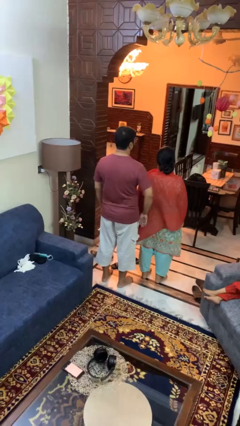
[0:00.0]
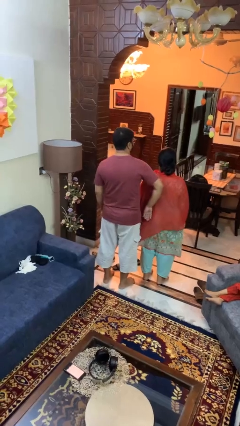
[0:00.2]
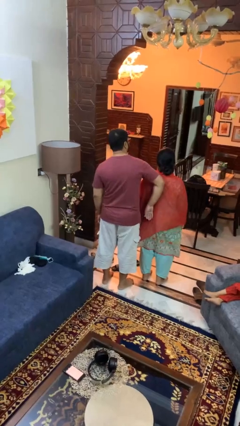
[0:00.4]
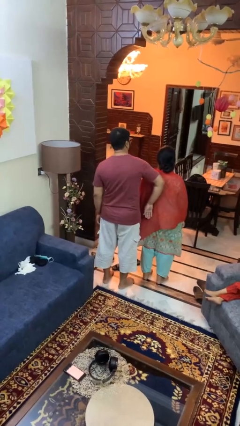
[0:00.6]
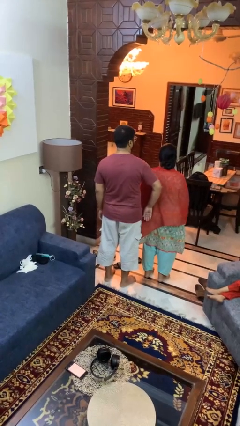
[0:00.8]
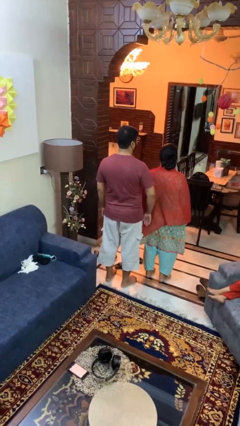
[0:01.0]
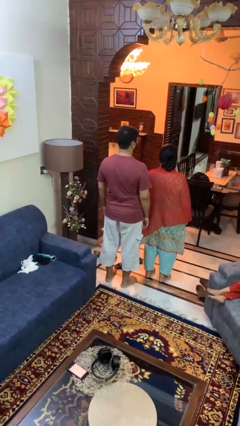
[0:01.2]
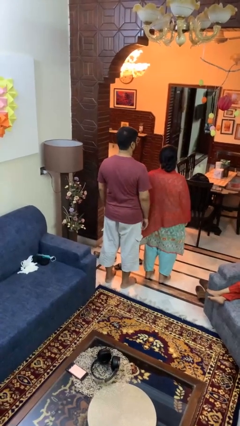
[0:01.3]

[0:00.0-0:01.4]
person shoves person

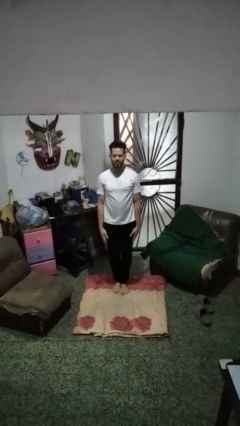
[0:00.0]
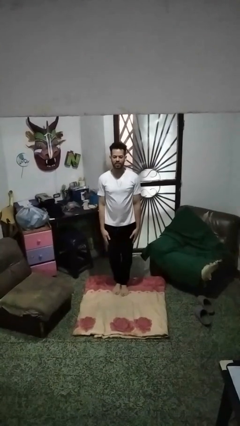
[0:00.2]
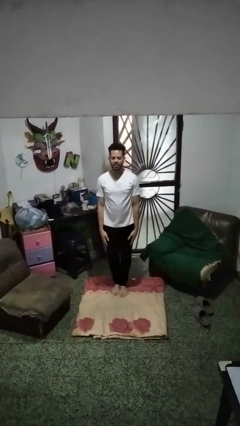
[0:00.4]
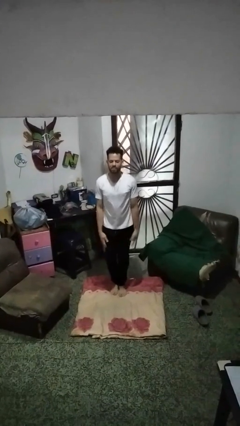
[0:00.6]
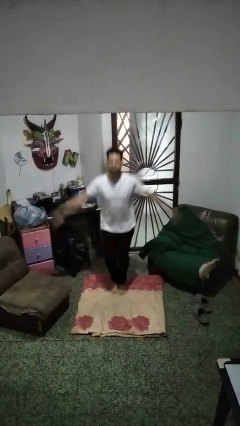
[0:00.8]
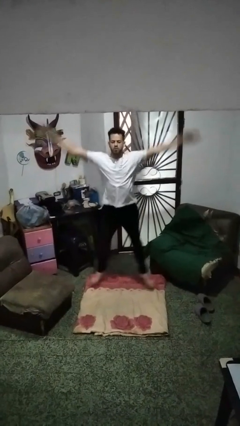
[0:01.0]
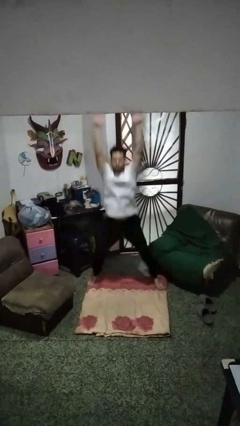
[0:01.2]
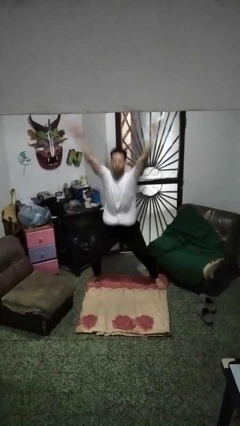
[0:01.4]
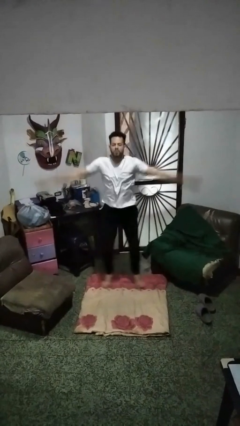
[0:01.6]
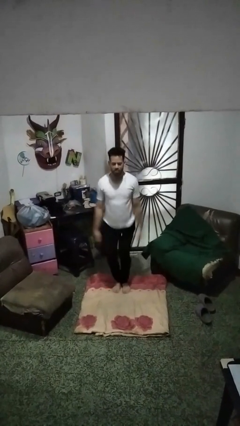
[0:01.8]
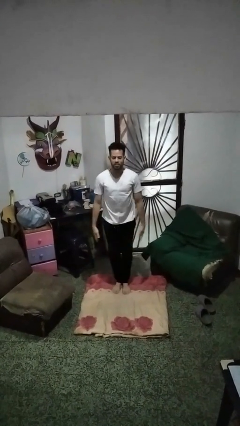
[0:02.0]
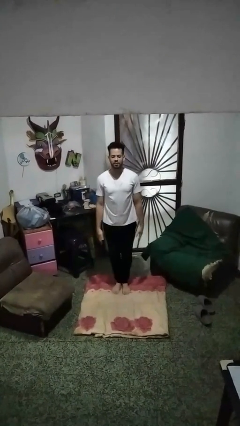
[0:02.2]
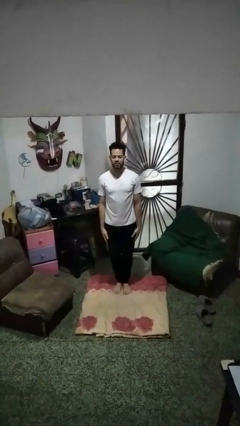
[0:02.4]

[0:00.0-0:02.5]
person exercises with jumping jacks

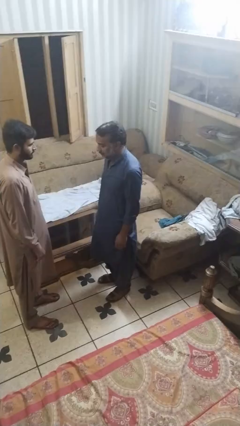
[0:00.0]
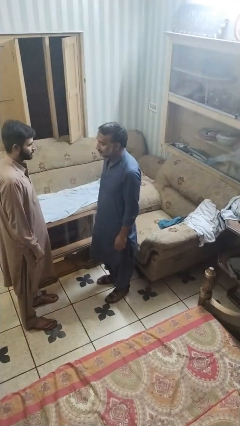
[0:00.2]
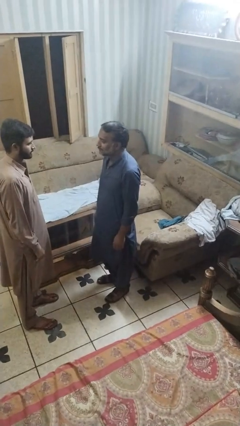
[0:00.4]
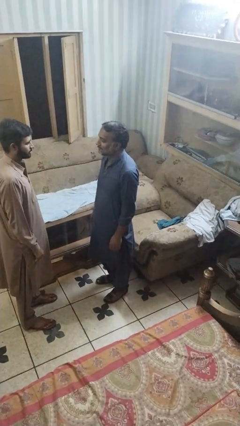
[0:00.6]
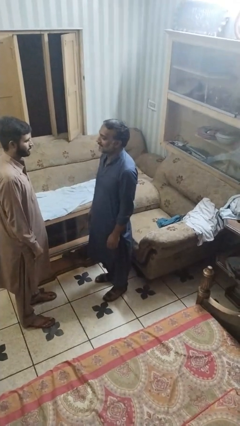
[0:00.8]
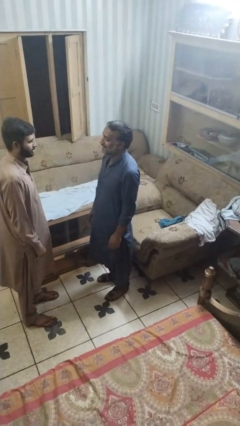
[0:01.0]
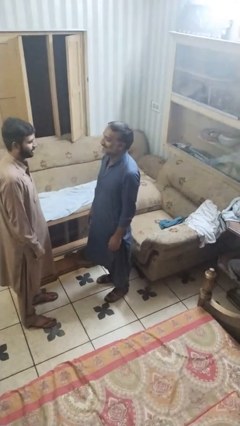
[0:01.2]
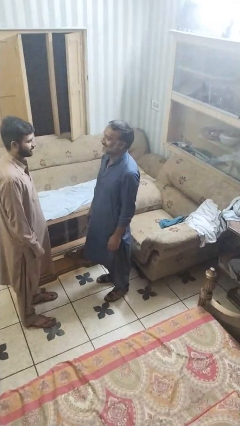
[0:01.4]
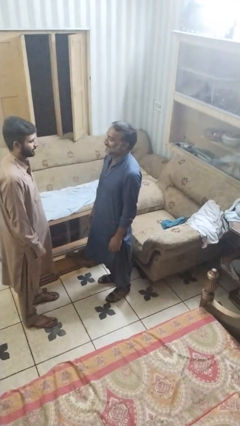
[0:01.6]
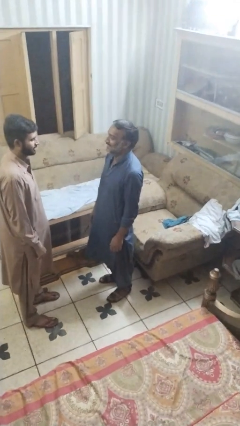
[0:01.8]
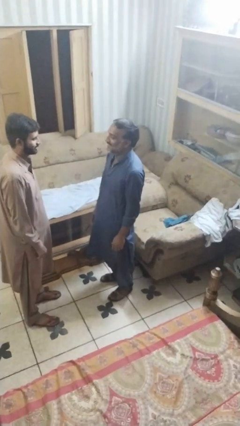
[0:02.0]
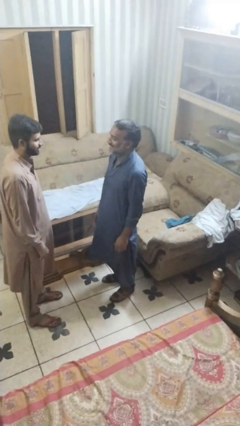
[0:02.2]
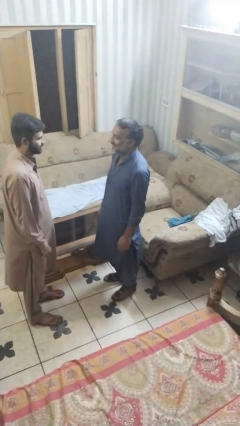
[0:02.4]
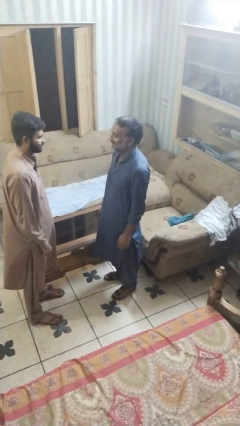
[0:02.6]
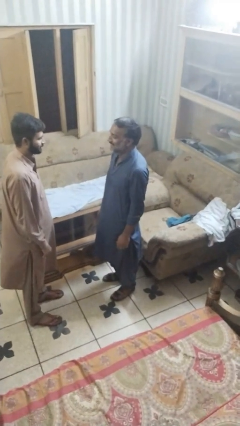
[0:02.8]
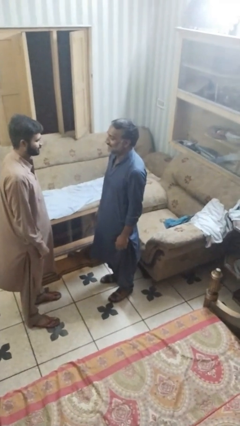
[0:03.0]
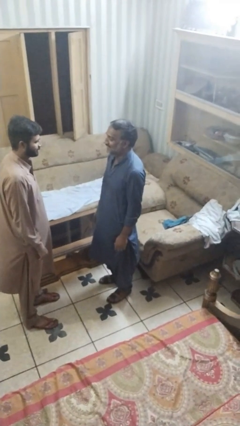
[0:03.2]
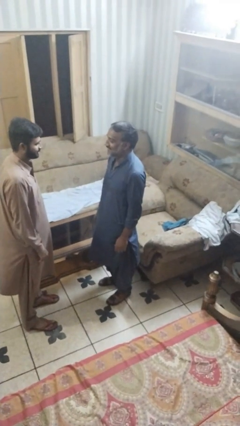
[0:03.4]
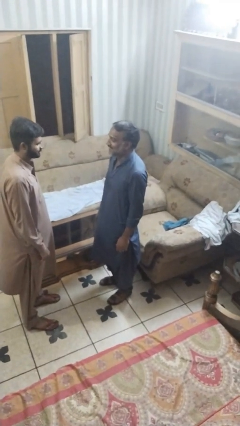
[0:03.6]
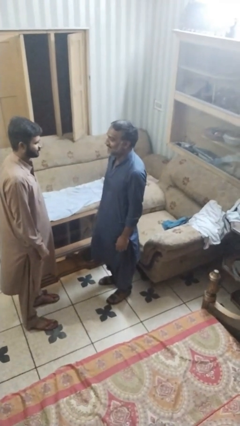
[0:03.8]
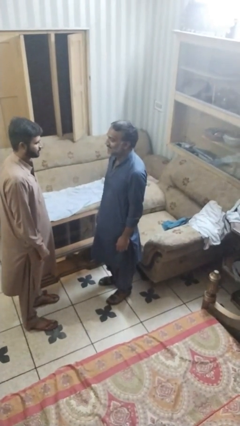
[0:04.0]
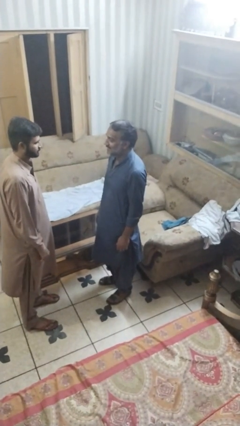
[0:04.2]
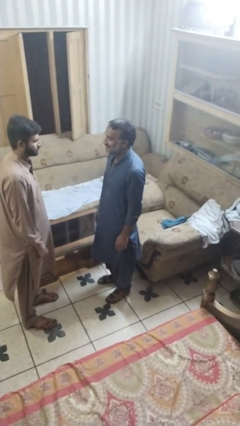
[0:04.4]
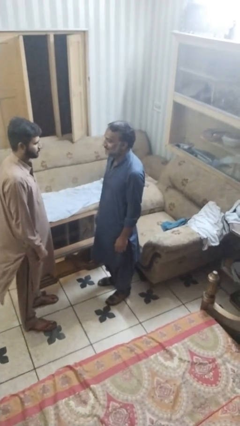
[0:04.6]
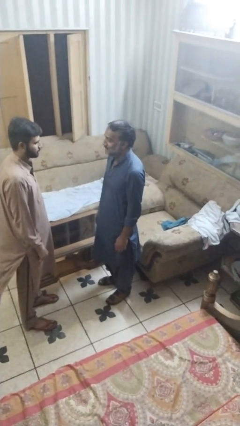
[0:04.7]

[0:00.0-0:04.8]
person laughs with person

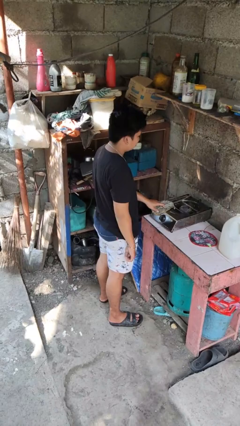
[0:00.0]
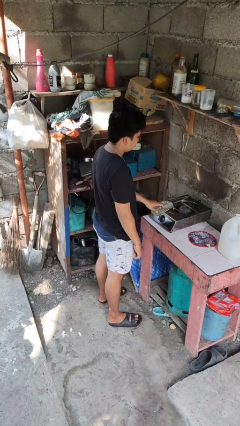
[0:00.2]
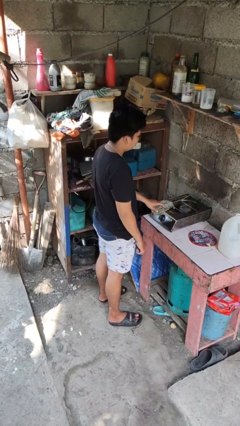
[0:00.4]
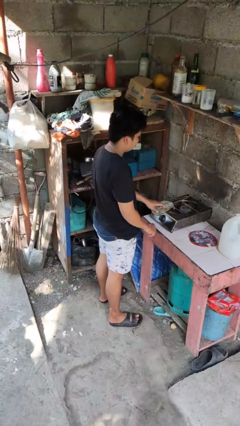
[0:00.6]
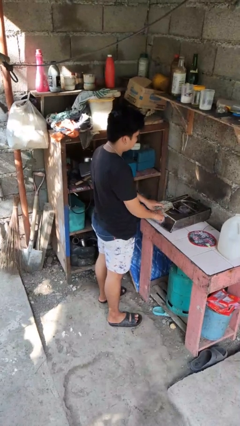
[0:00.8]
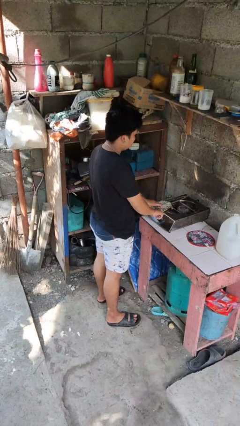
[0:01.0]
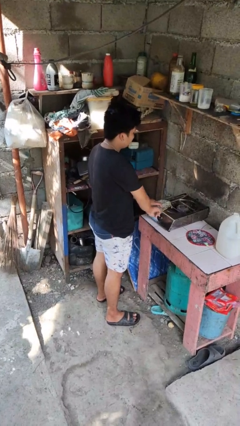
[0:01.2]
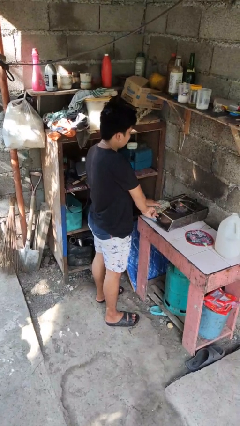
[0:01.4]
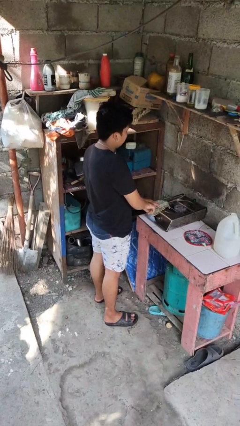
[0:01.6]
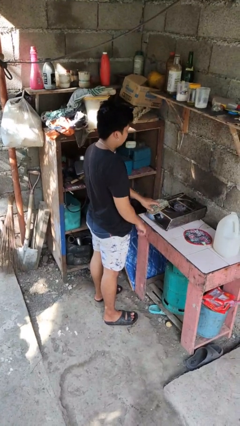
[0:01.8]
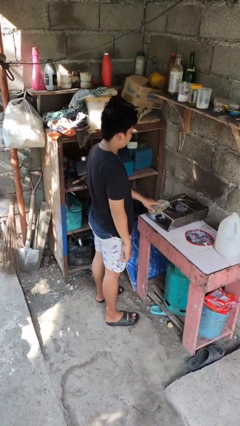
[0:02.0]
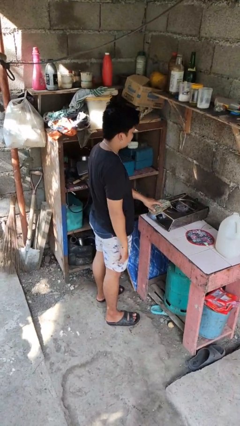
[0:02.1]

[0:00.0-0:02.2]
person turns on stovetop

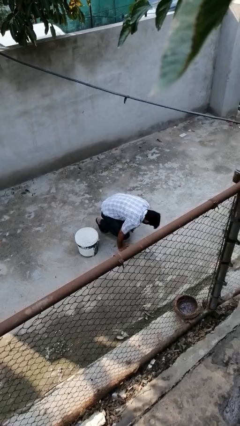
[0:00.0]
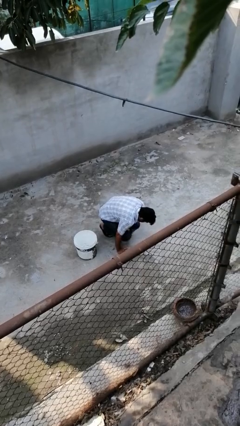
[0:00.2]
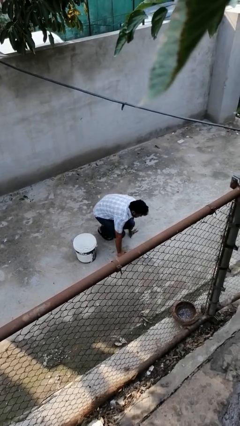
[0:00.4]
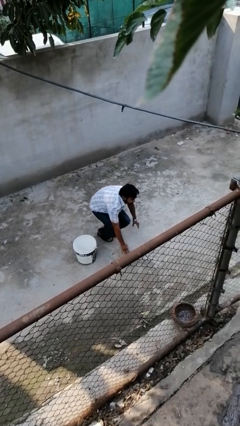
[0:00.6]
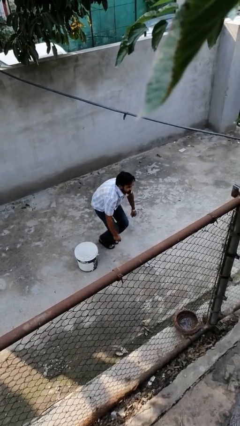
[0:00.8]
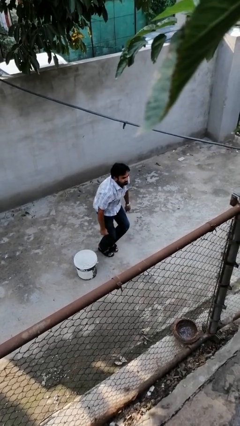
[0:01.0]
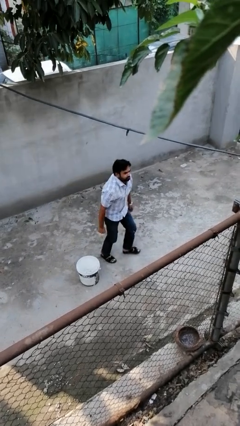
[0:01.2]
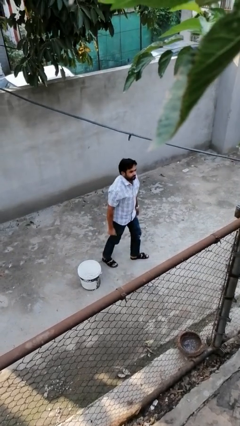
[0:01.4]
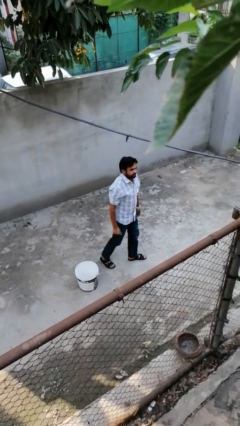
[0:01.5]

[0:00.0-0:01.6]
person stands up from floor

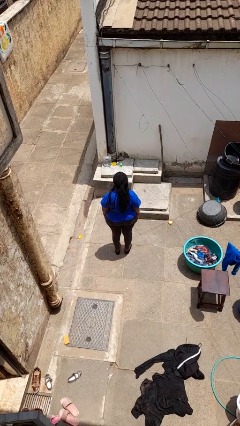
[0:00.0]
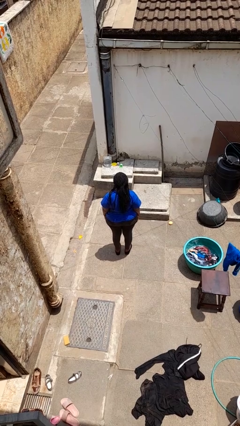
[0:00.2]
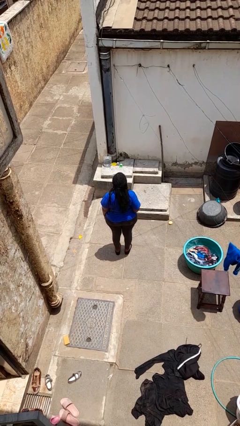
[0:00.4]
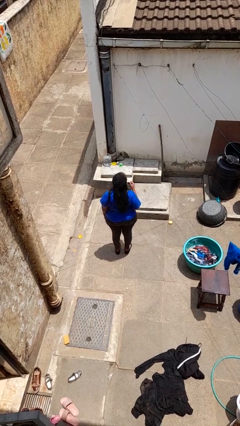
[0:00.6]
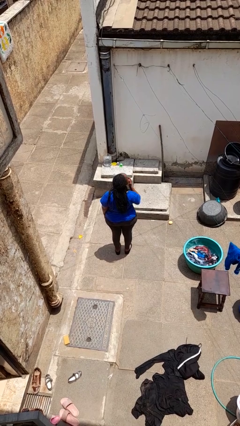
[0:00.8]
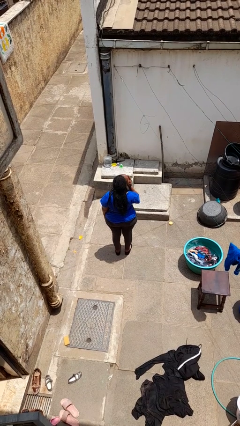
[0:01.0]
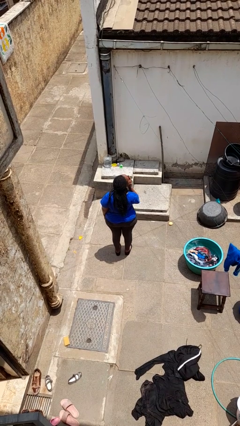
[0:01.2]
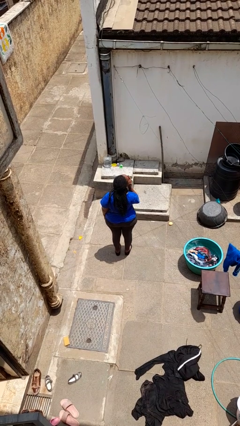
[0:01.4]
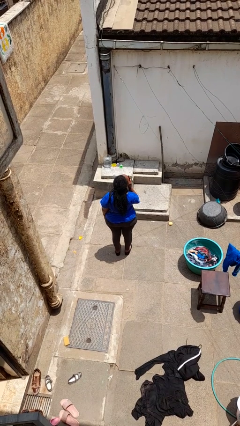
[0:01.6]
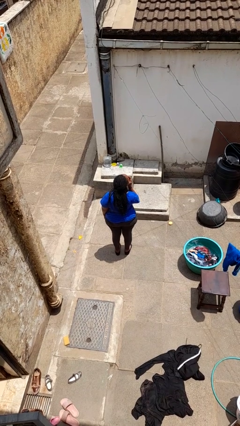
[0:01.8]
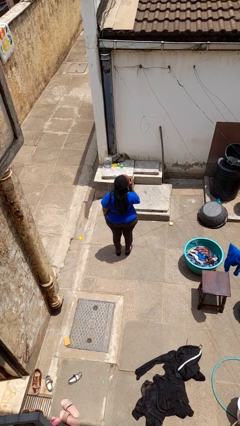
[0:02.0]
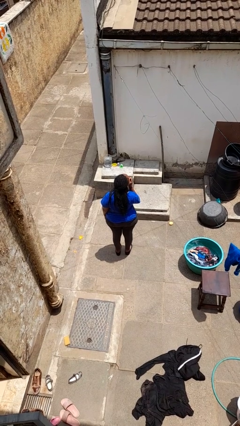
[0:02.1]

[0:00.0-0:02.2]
person yawns

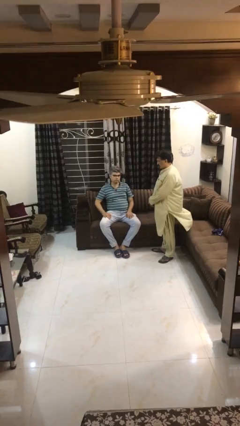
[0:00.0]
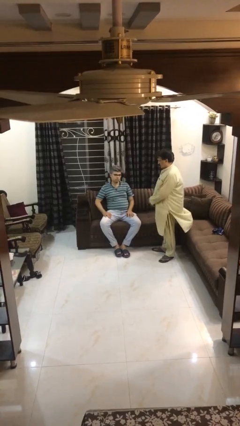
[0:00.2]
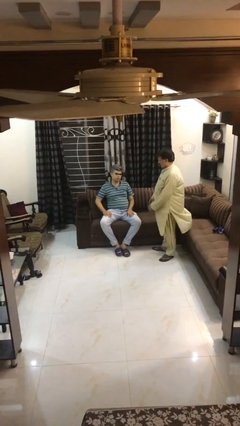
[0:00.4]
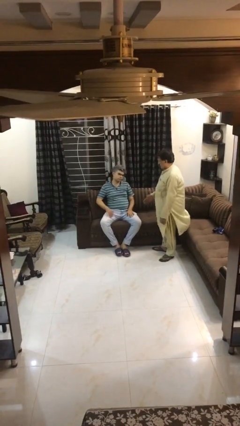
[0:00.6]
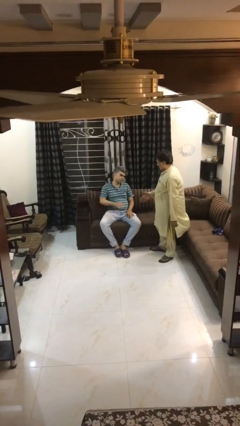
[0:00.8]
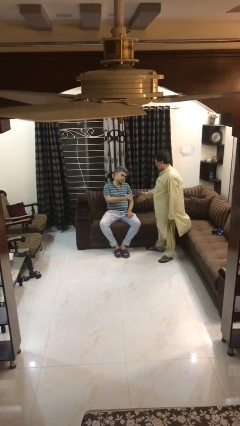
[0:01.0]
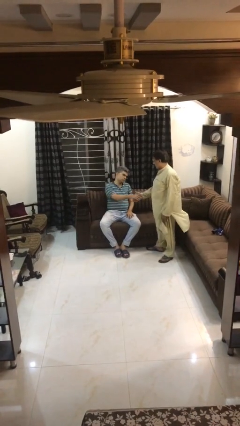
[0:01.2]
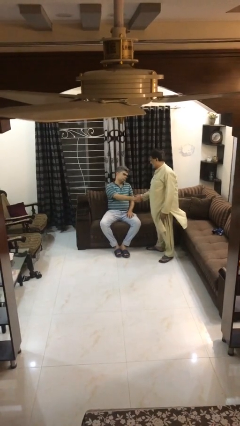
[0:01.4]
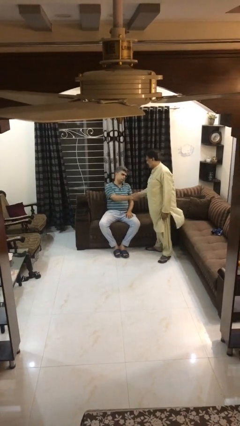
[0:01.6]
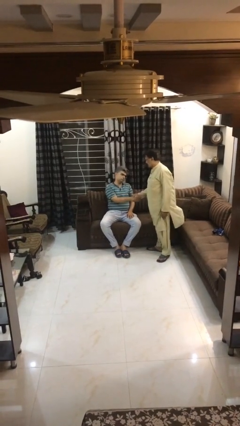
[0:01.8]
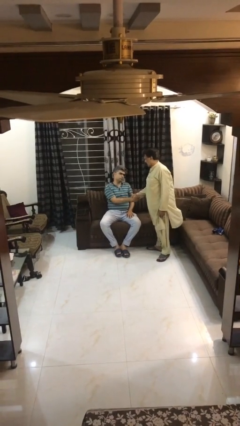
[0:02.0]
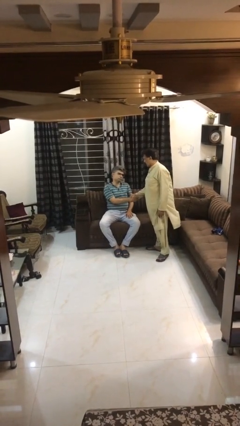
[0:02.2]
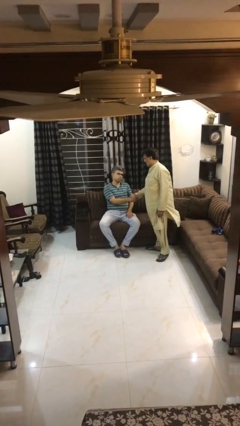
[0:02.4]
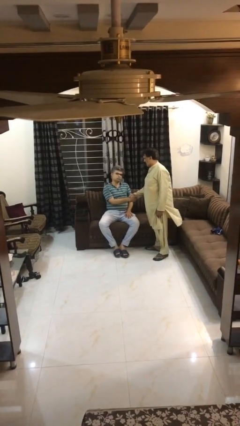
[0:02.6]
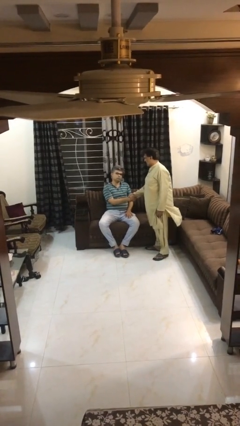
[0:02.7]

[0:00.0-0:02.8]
person shakes hand
